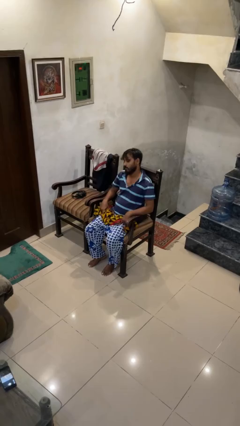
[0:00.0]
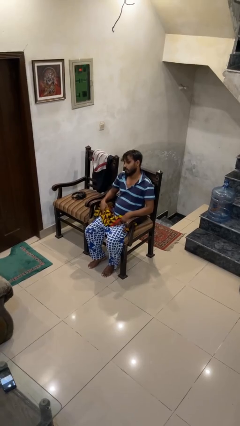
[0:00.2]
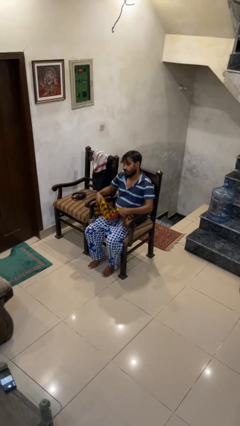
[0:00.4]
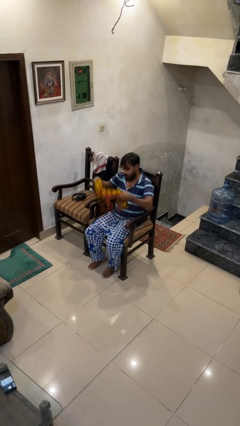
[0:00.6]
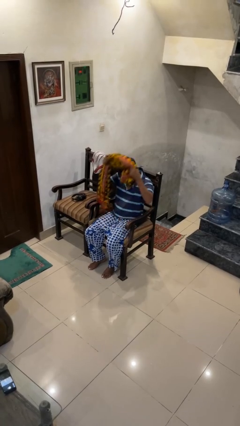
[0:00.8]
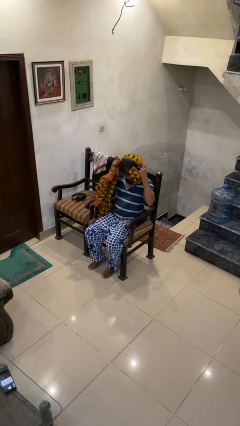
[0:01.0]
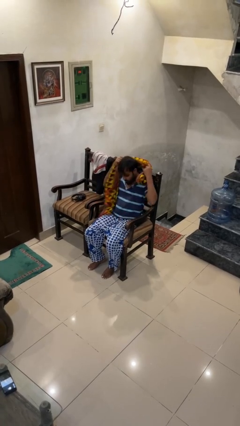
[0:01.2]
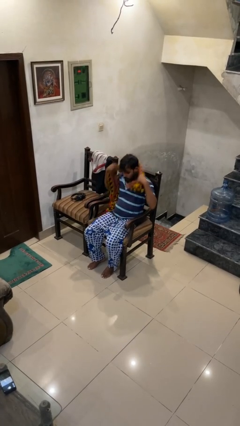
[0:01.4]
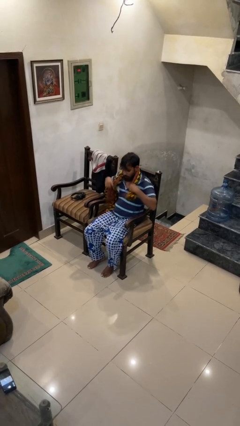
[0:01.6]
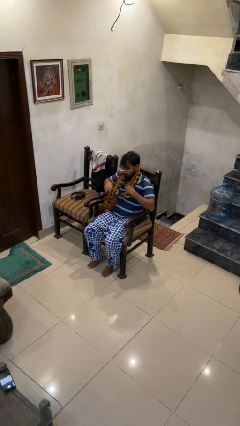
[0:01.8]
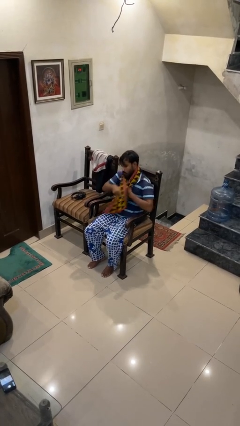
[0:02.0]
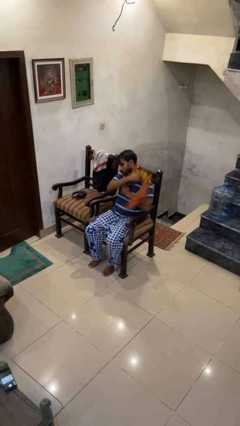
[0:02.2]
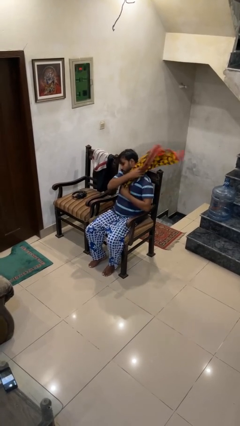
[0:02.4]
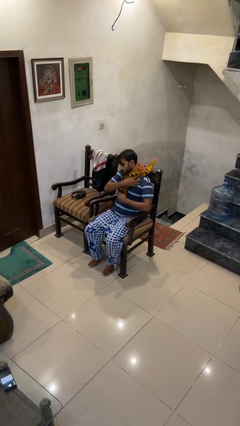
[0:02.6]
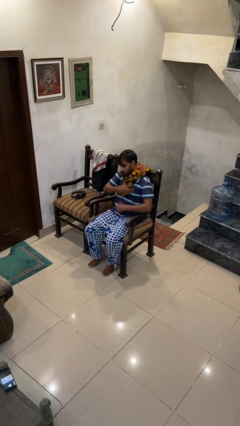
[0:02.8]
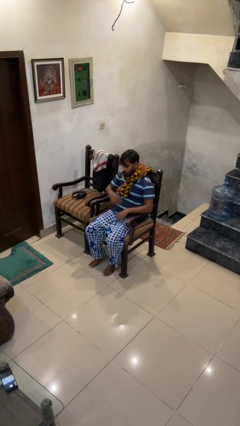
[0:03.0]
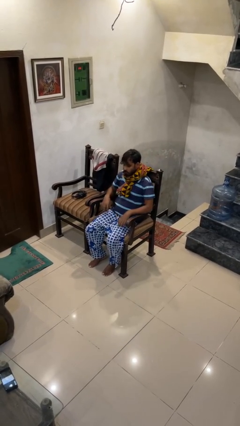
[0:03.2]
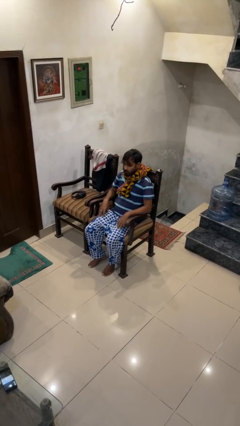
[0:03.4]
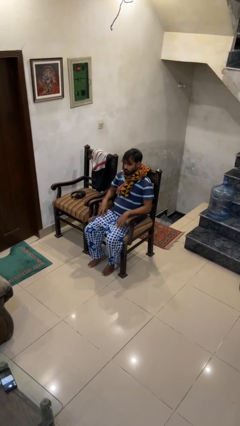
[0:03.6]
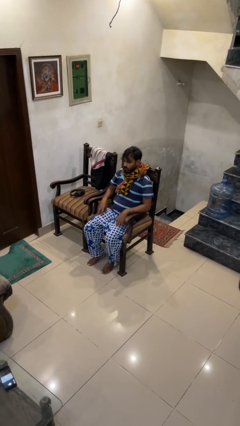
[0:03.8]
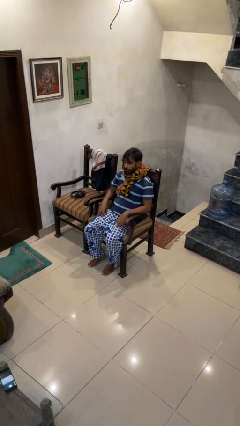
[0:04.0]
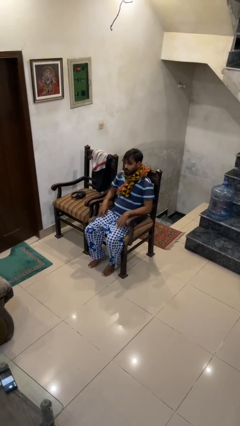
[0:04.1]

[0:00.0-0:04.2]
person puts on scarf

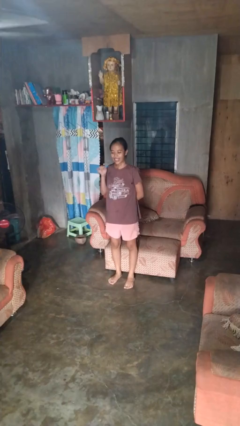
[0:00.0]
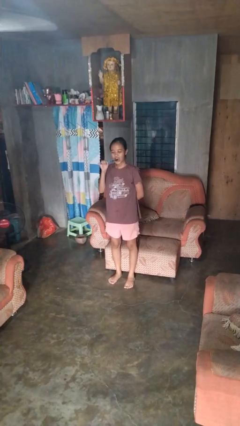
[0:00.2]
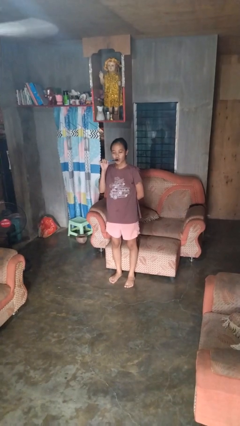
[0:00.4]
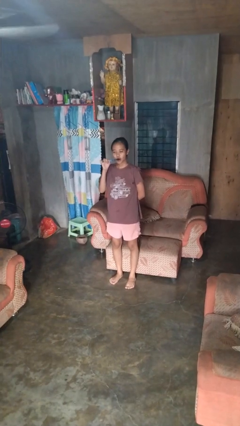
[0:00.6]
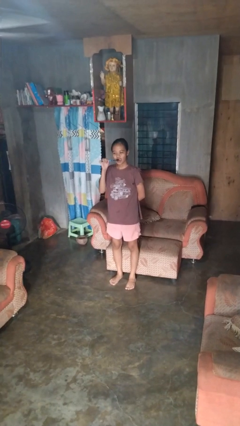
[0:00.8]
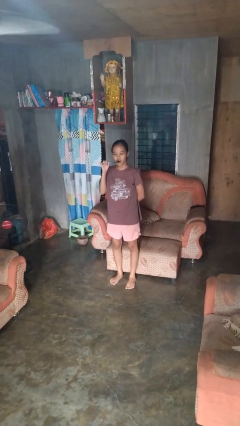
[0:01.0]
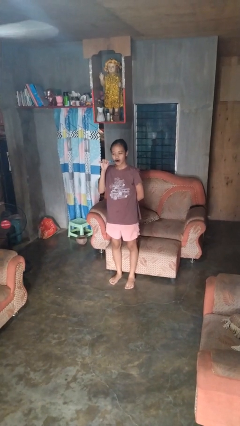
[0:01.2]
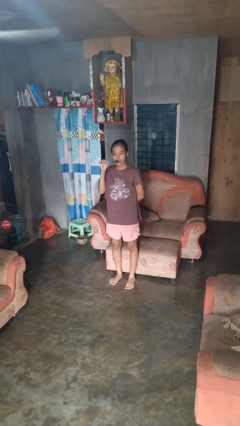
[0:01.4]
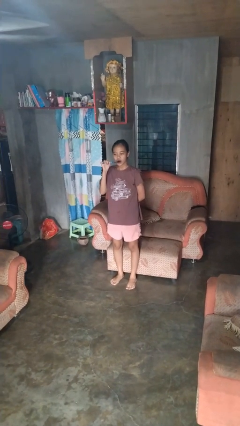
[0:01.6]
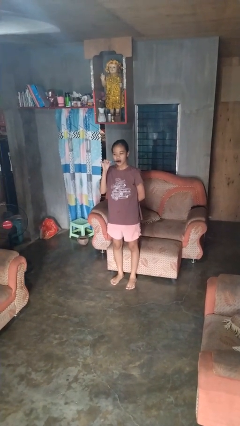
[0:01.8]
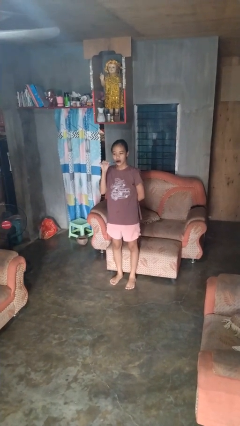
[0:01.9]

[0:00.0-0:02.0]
person brushes teeth

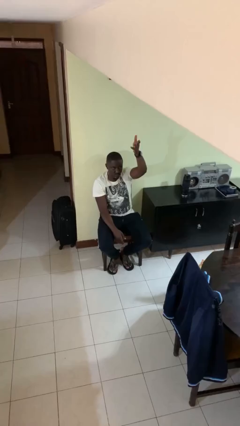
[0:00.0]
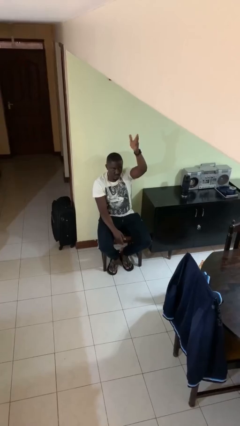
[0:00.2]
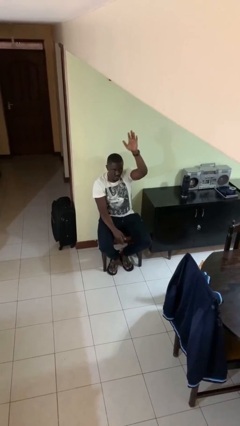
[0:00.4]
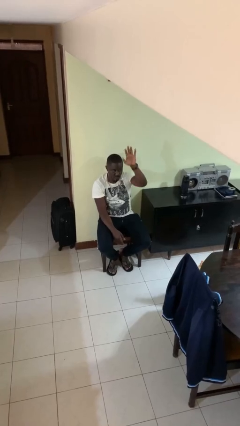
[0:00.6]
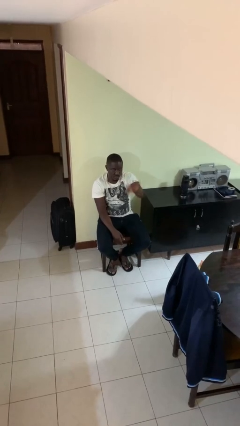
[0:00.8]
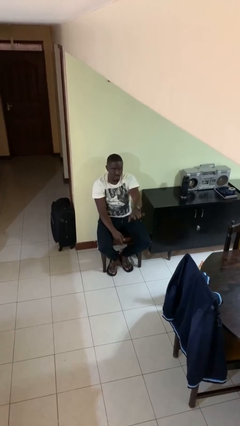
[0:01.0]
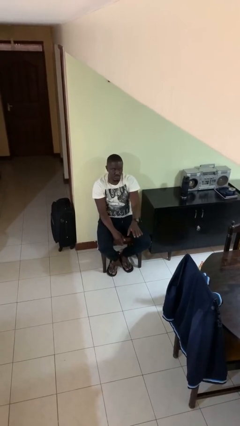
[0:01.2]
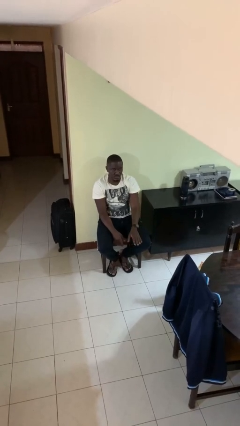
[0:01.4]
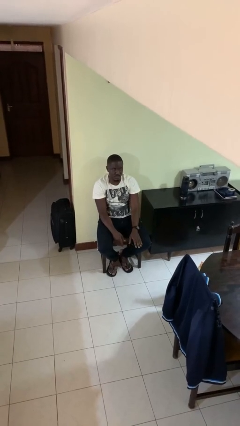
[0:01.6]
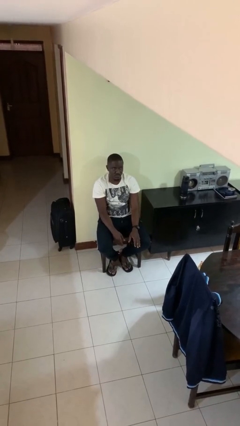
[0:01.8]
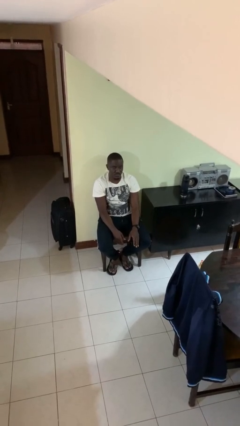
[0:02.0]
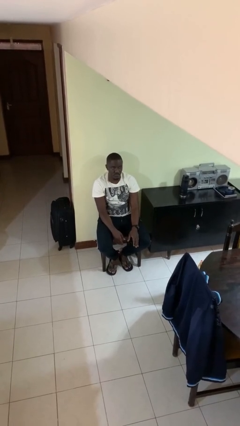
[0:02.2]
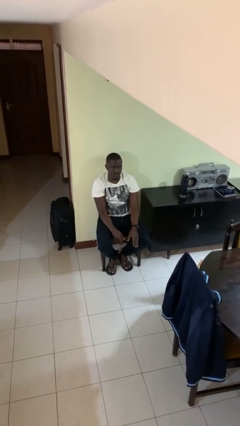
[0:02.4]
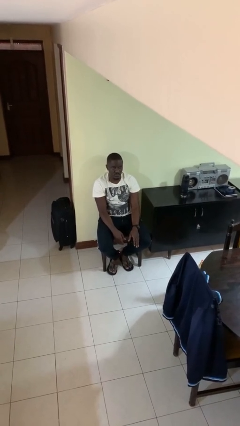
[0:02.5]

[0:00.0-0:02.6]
person gestures swipe down

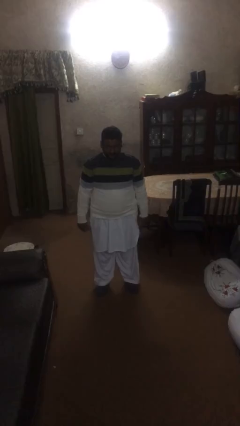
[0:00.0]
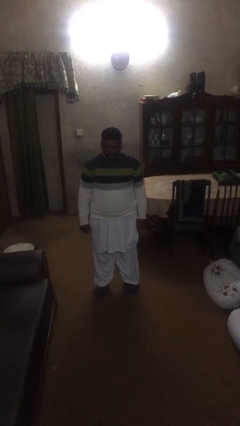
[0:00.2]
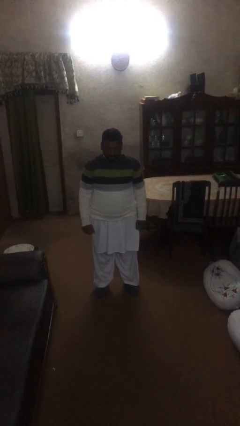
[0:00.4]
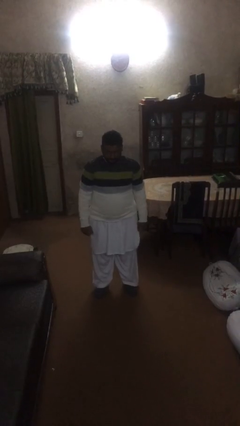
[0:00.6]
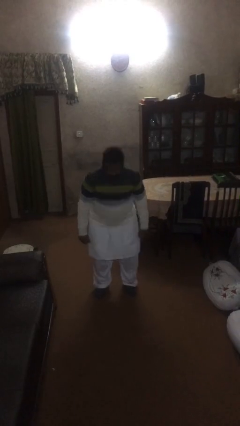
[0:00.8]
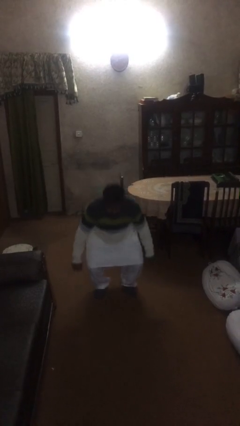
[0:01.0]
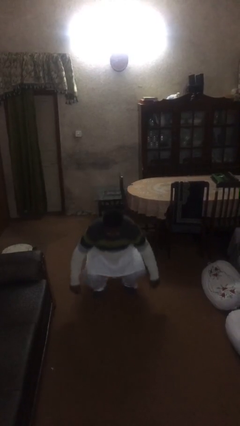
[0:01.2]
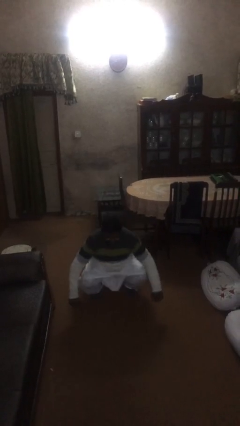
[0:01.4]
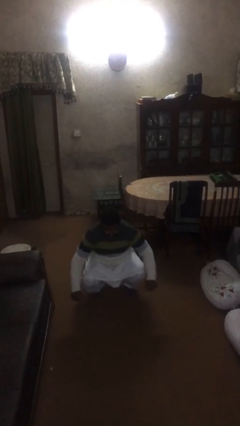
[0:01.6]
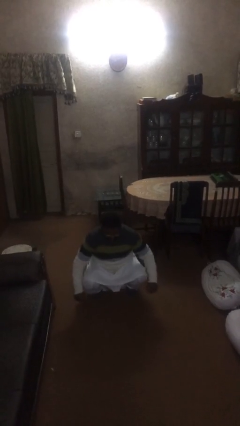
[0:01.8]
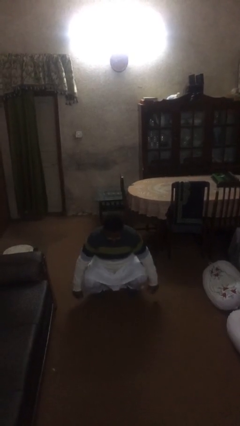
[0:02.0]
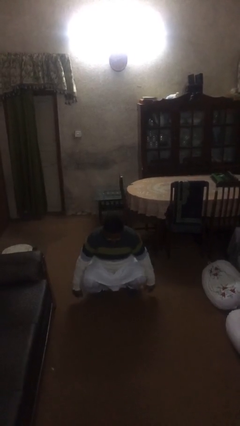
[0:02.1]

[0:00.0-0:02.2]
person sits down

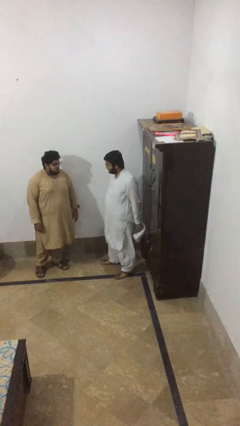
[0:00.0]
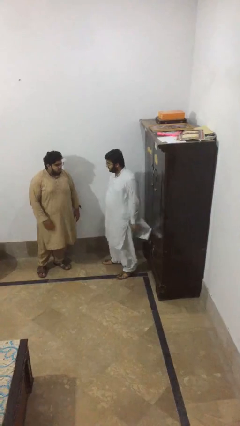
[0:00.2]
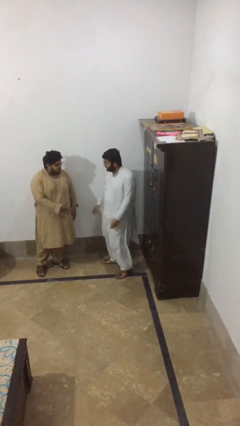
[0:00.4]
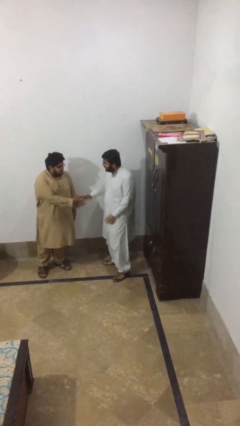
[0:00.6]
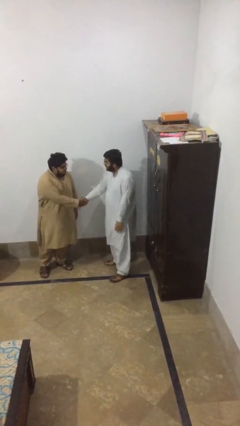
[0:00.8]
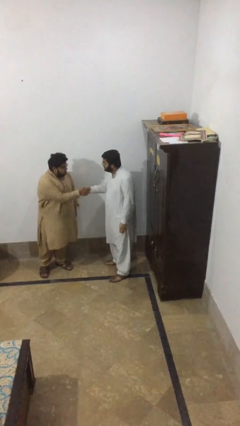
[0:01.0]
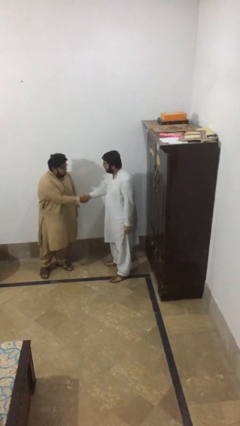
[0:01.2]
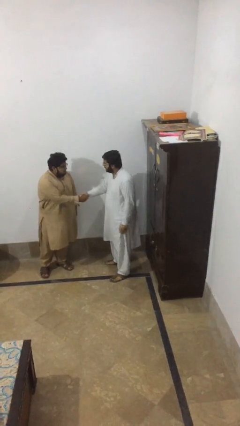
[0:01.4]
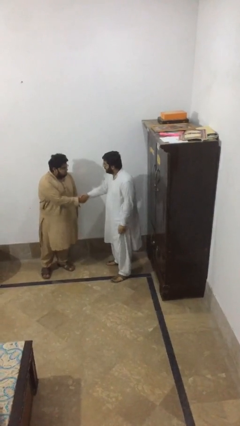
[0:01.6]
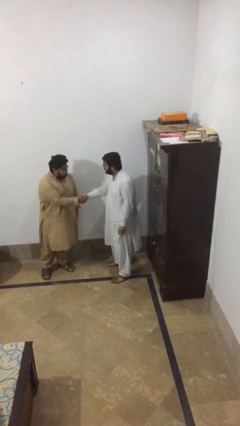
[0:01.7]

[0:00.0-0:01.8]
person shakes hand

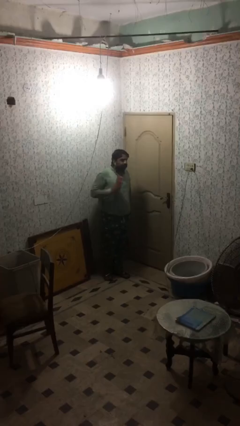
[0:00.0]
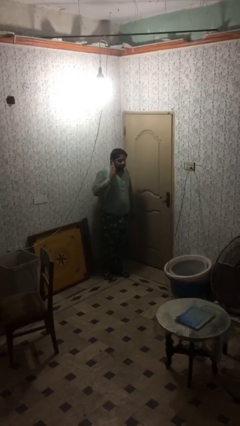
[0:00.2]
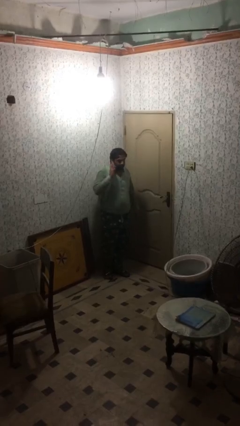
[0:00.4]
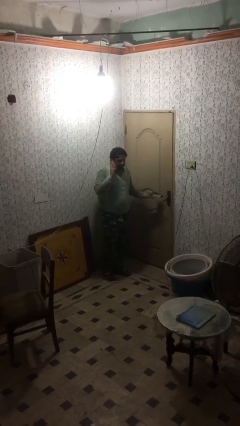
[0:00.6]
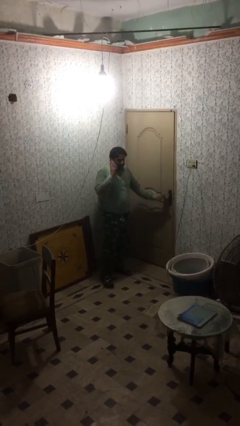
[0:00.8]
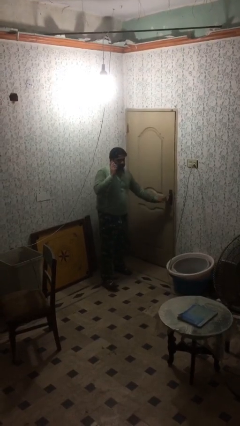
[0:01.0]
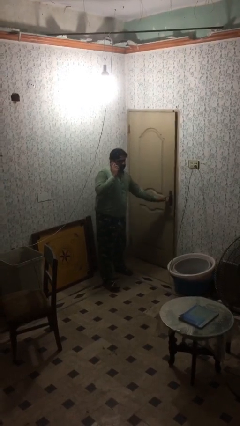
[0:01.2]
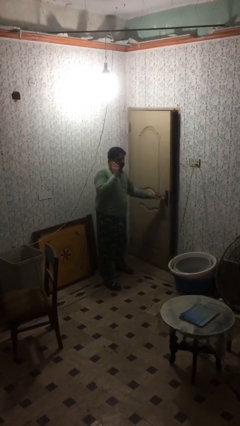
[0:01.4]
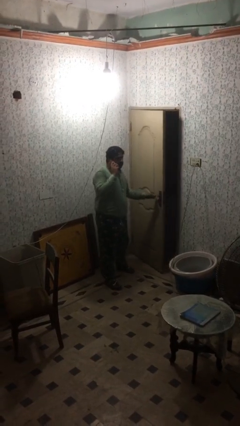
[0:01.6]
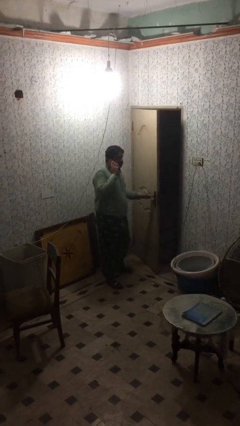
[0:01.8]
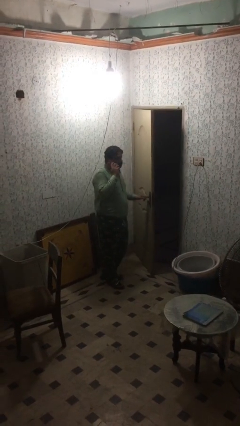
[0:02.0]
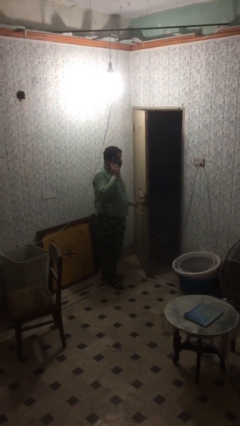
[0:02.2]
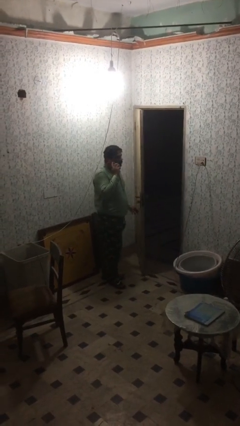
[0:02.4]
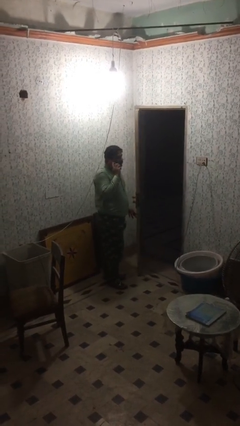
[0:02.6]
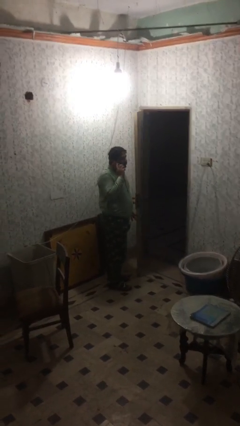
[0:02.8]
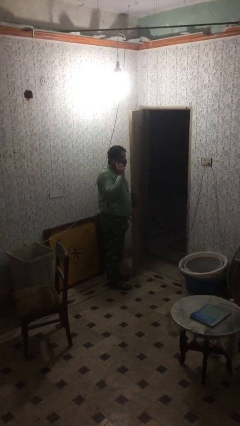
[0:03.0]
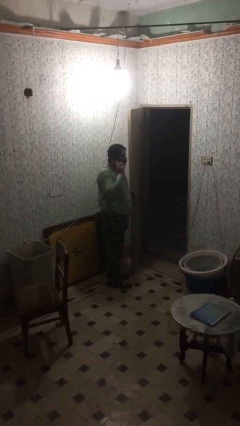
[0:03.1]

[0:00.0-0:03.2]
person opens facility door

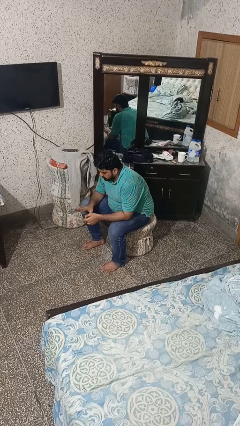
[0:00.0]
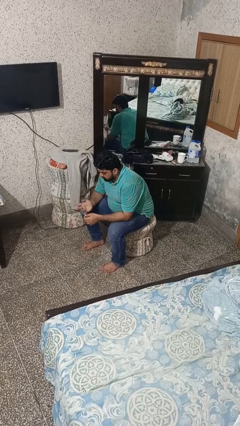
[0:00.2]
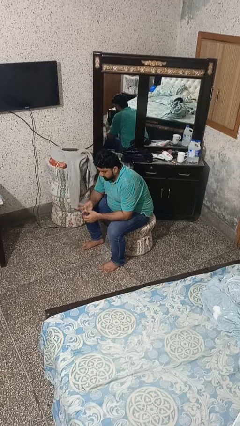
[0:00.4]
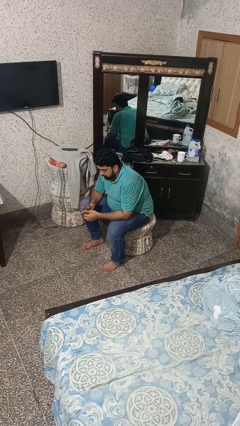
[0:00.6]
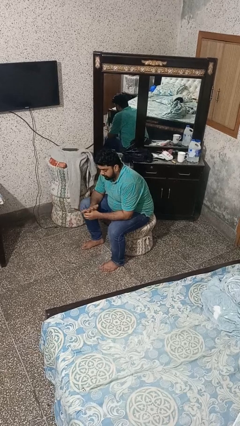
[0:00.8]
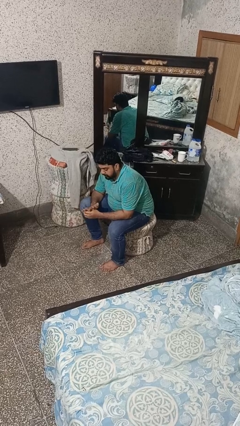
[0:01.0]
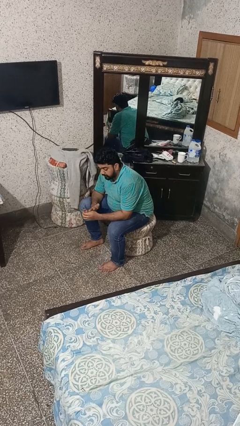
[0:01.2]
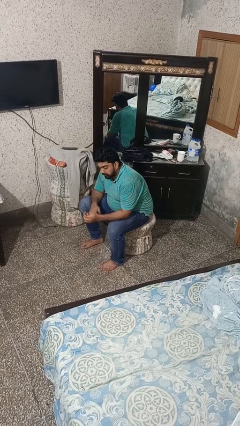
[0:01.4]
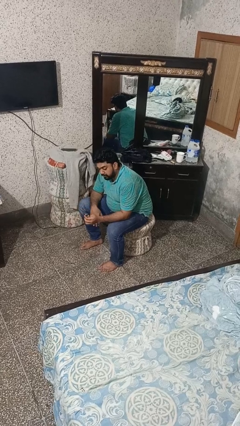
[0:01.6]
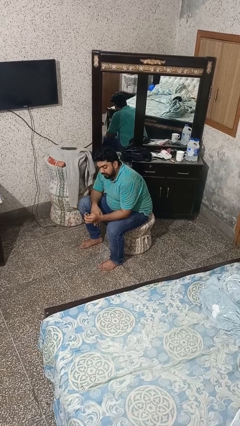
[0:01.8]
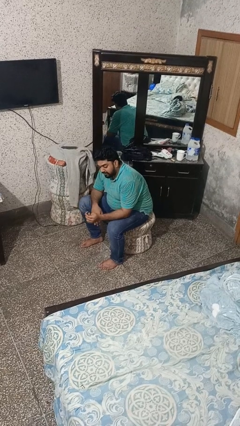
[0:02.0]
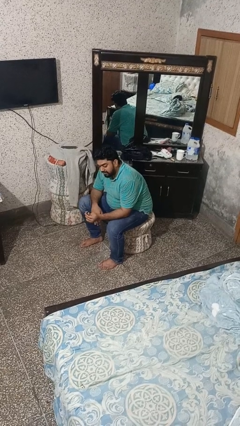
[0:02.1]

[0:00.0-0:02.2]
person takes off ring
